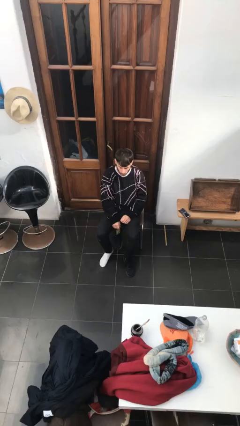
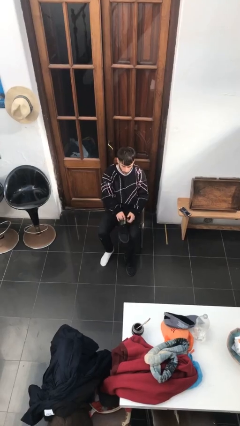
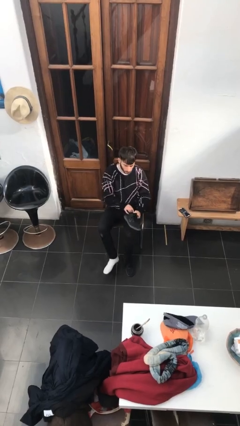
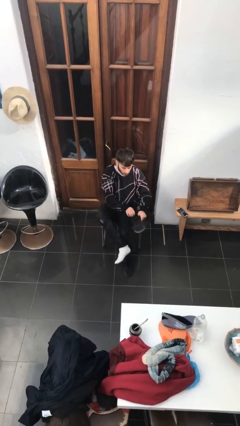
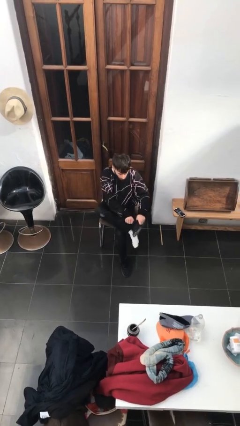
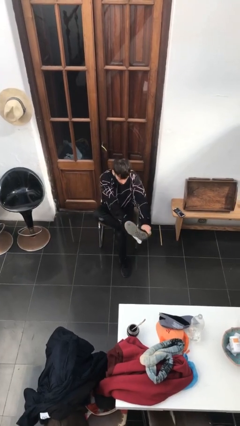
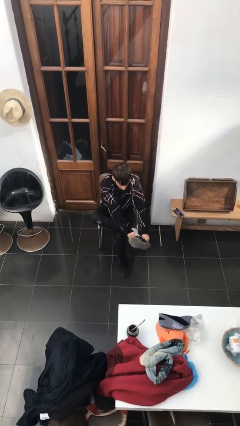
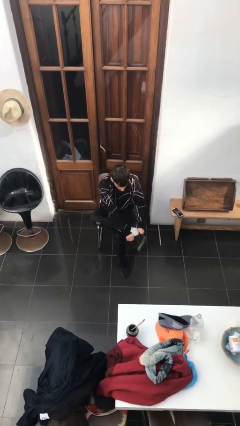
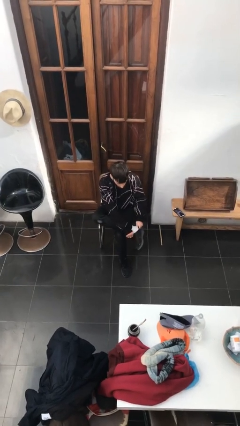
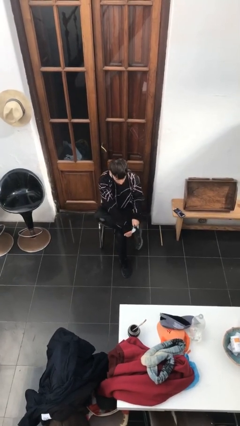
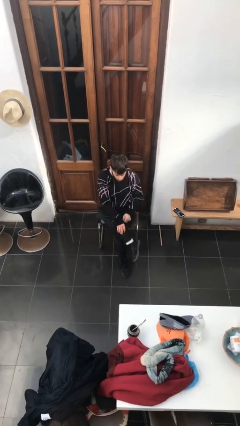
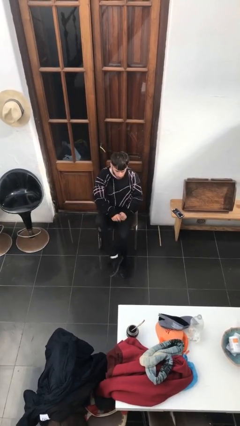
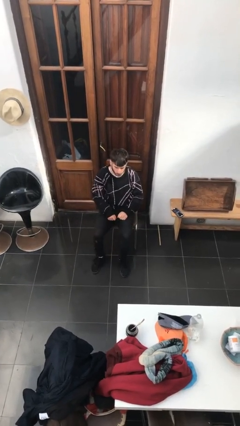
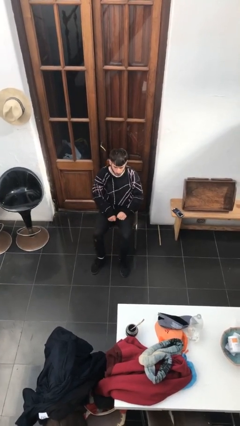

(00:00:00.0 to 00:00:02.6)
person puts on shoes

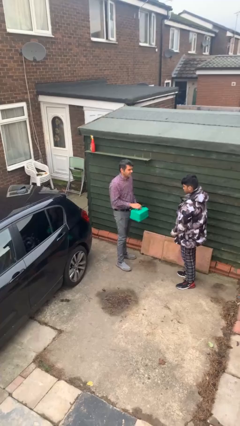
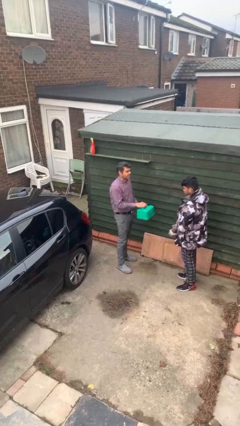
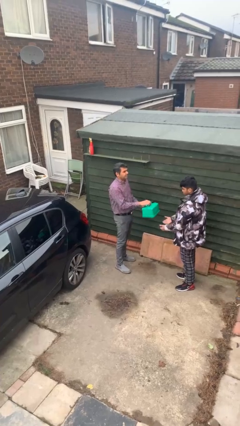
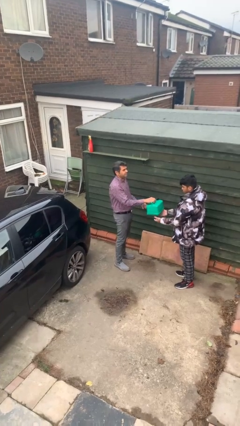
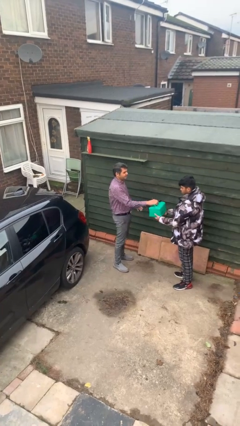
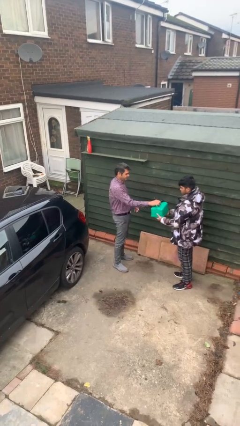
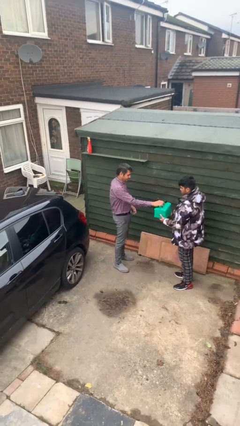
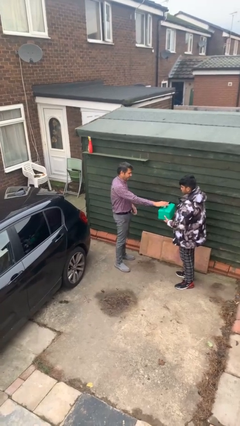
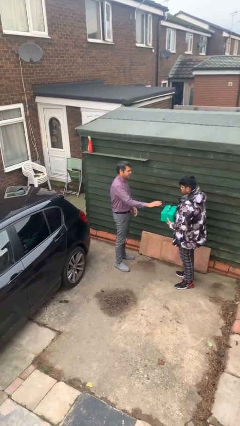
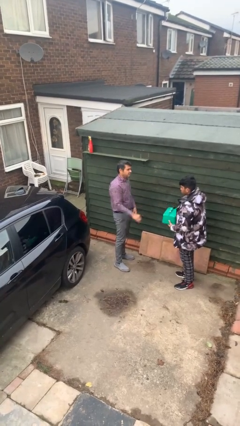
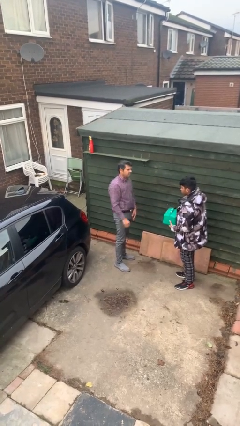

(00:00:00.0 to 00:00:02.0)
person transfers object to person

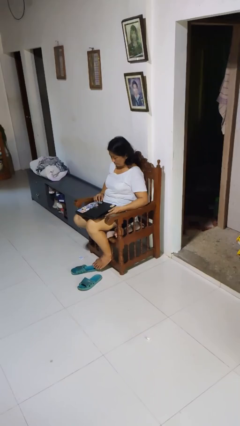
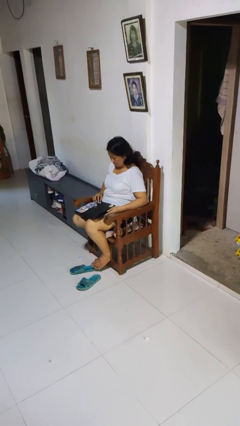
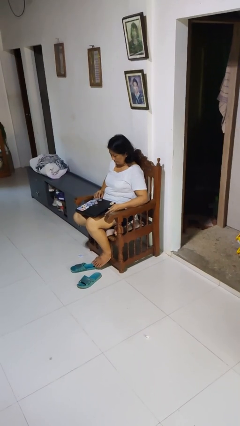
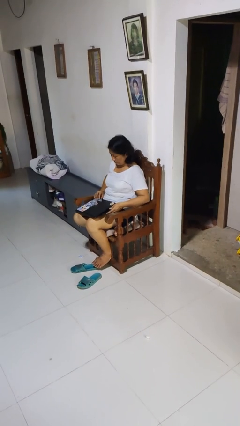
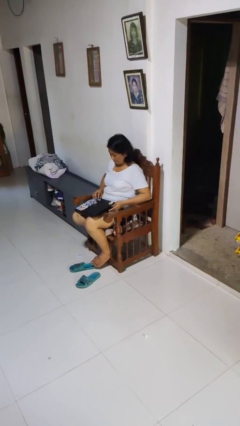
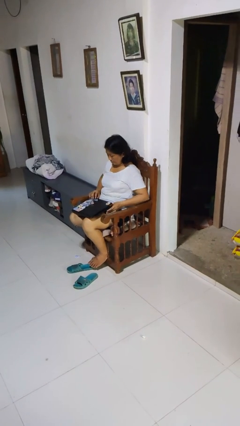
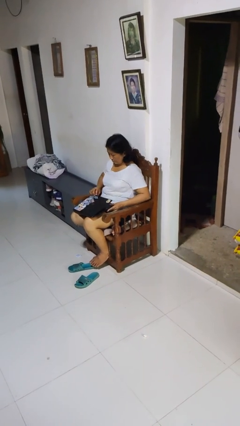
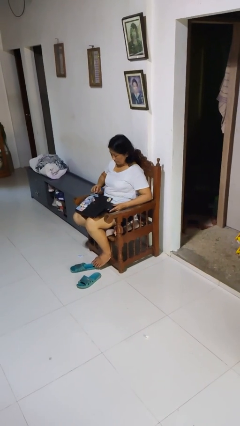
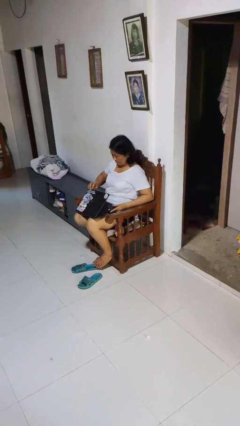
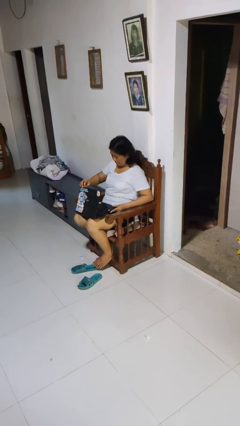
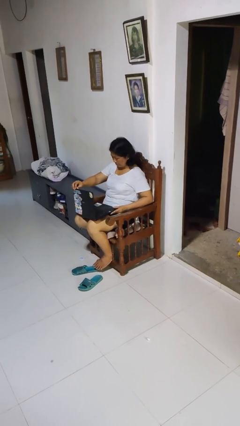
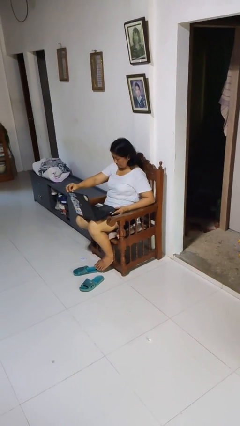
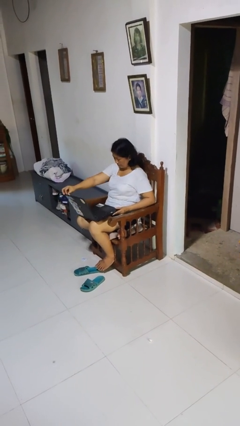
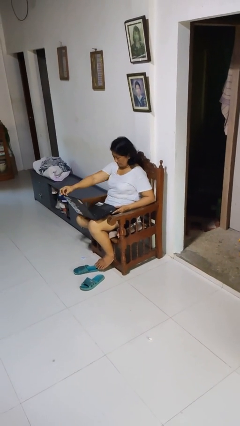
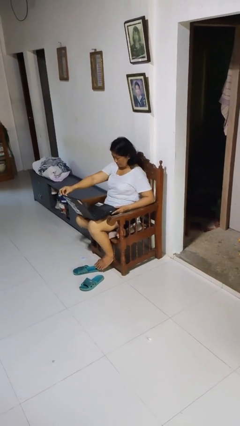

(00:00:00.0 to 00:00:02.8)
person opens laptop

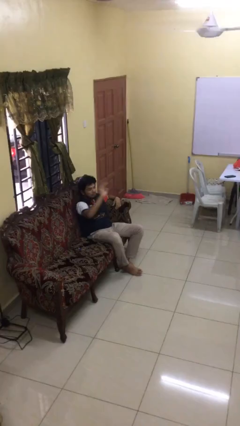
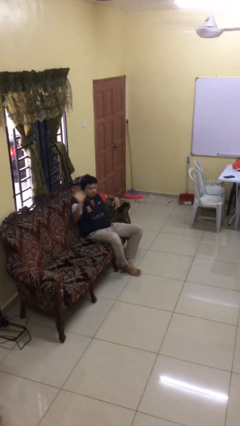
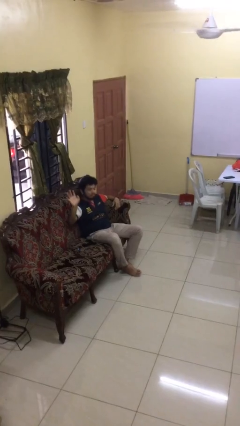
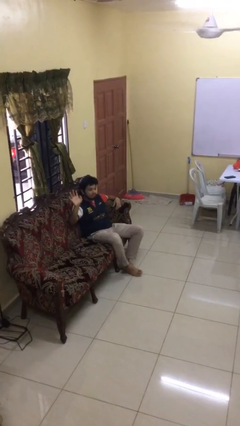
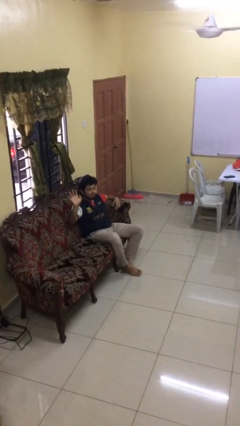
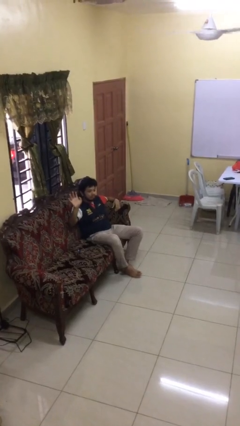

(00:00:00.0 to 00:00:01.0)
person gestures swipe right

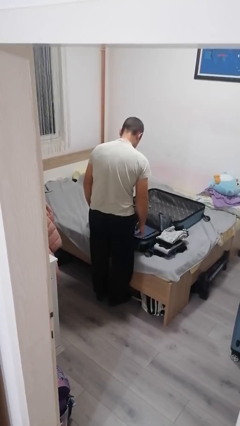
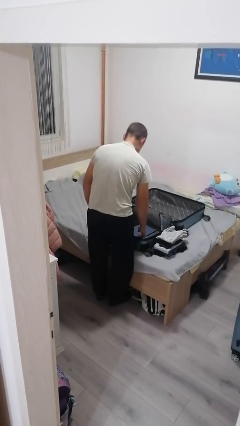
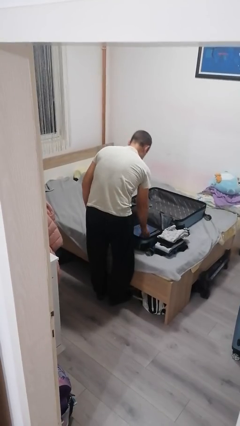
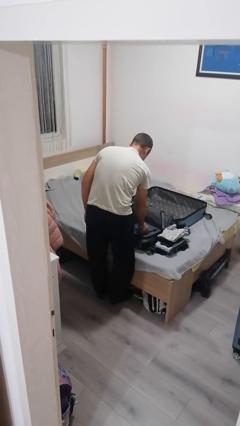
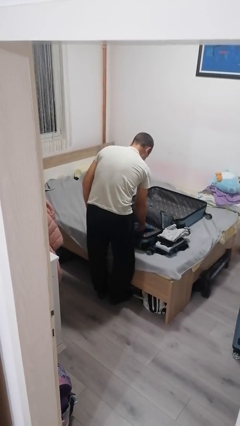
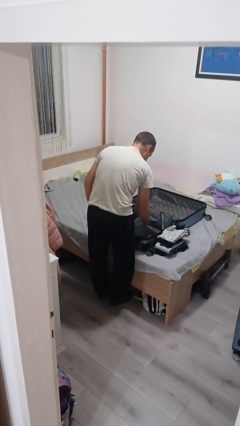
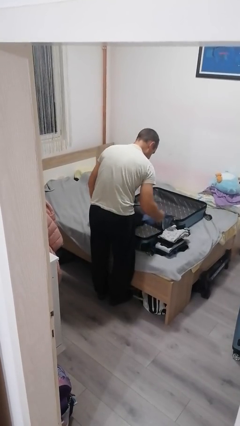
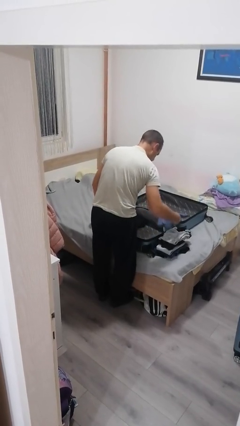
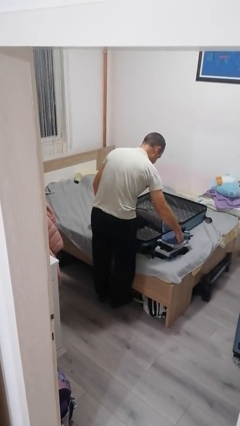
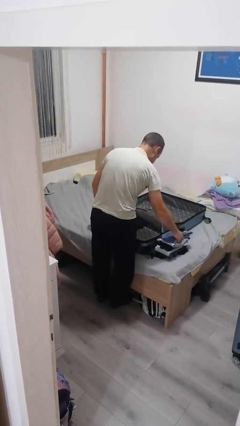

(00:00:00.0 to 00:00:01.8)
person unloads clothes from suitcase

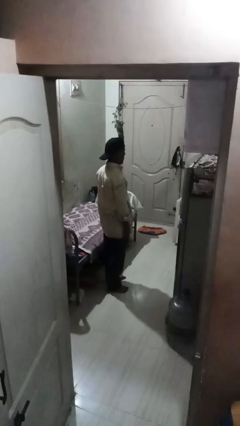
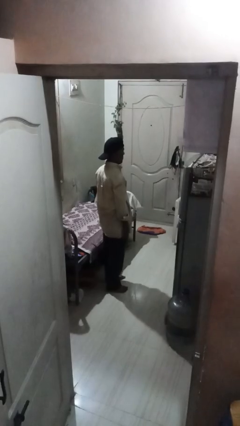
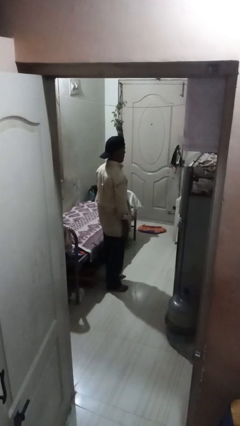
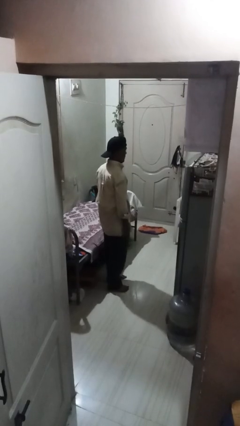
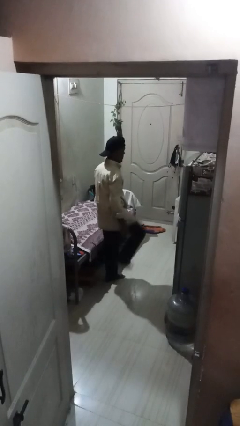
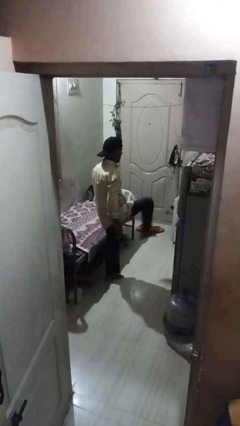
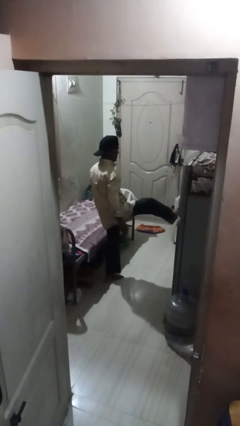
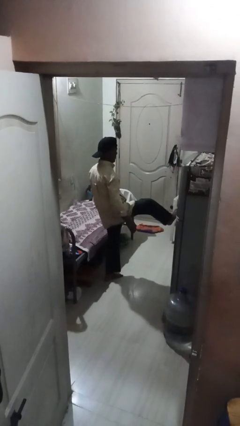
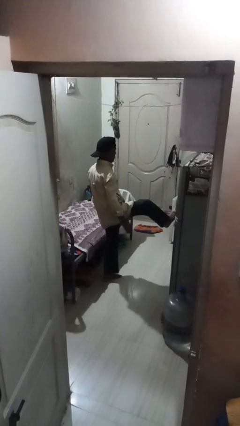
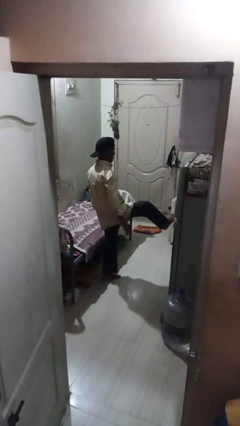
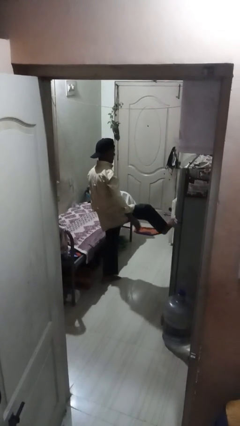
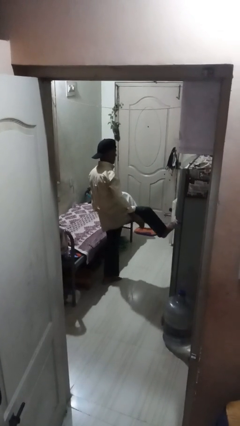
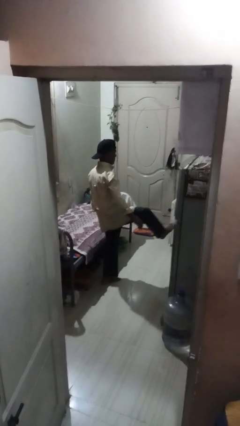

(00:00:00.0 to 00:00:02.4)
person karate kicks

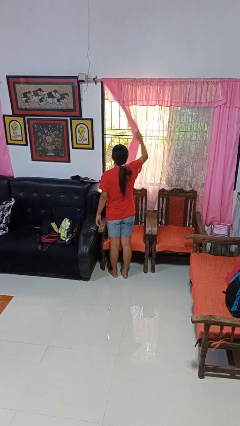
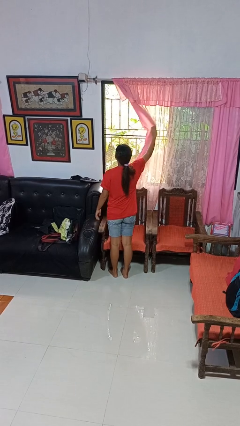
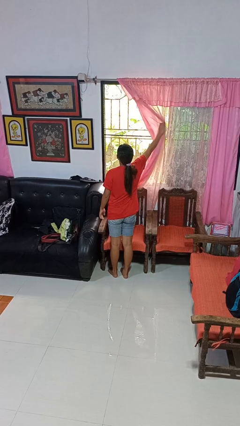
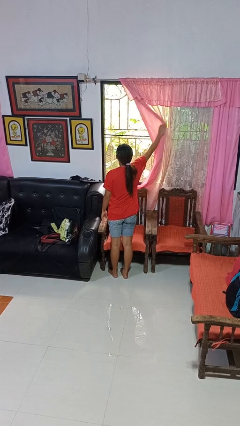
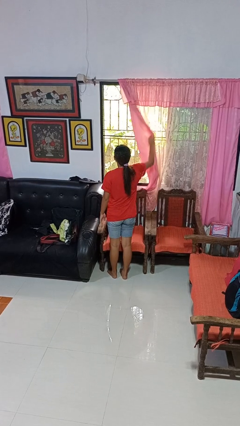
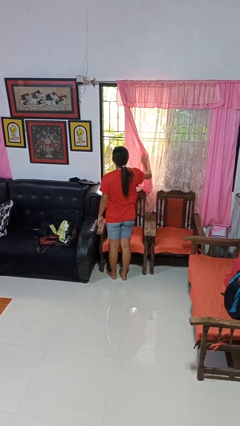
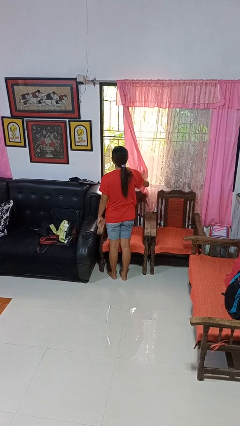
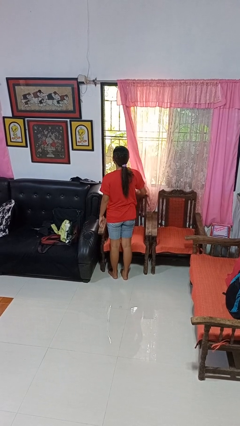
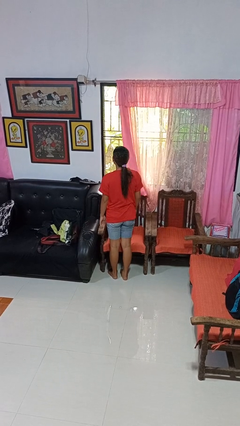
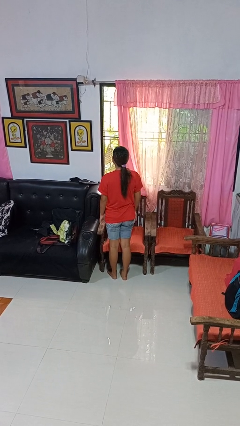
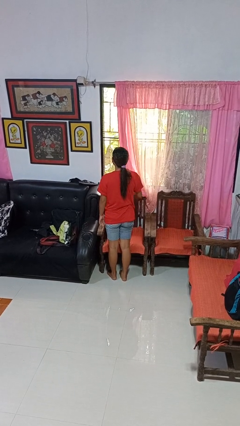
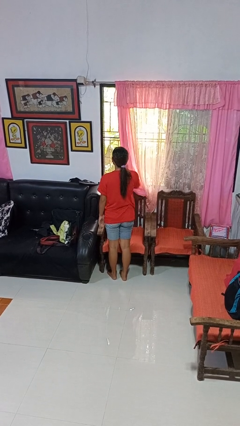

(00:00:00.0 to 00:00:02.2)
person opens curtains

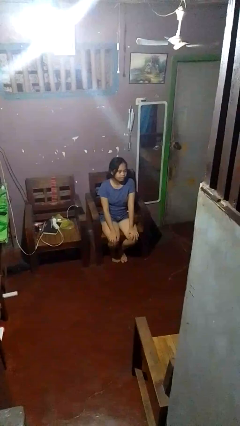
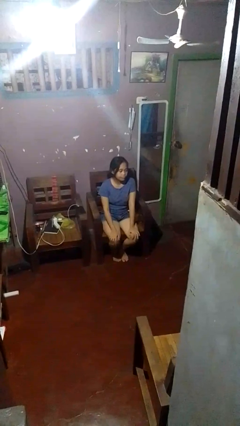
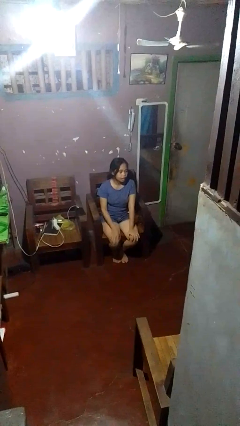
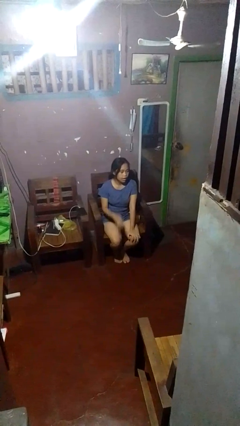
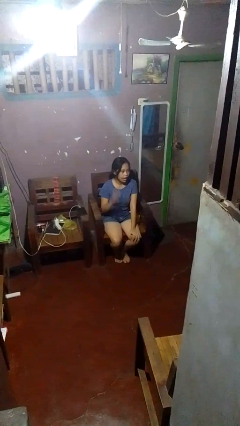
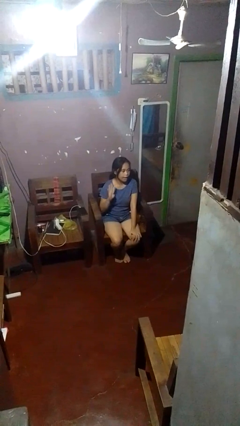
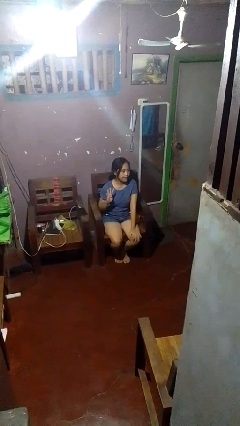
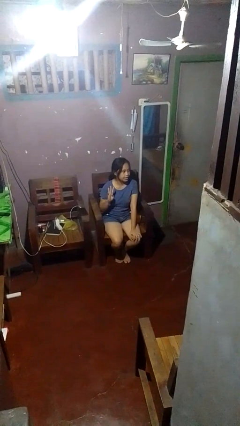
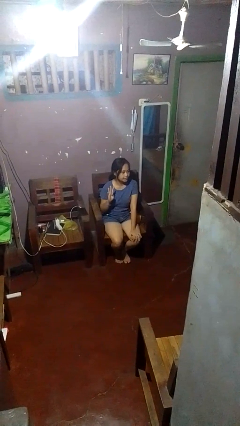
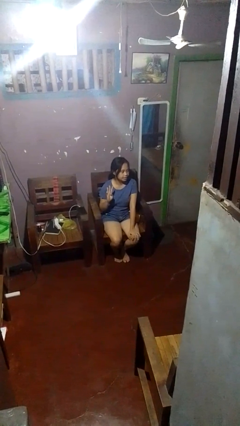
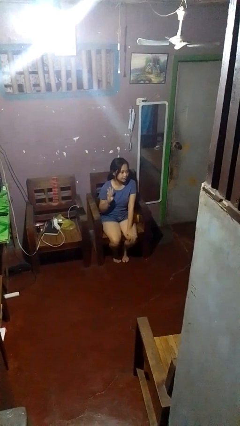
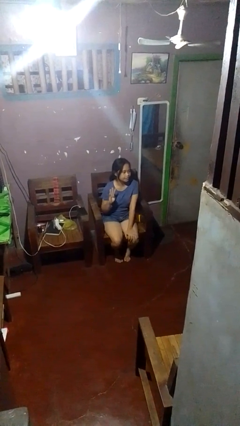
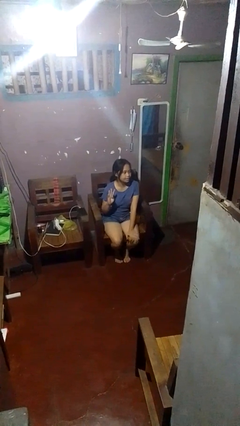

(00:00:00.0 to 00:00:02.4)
person gestures number four
